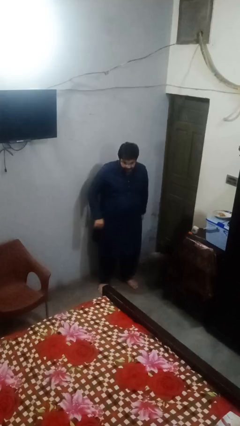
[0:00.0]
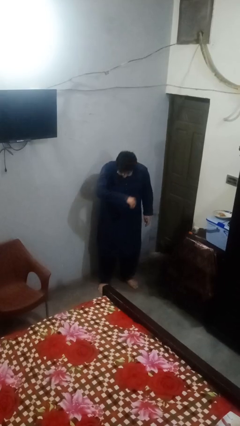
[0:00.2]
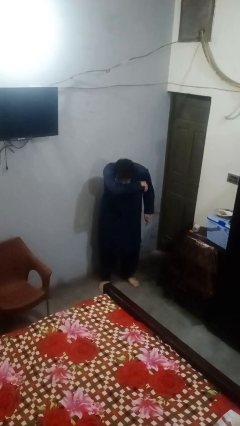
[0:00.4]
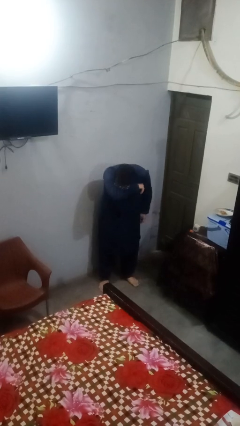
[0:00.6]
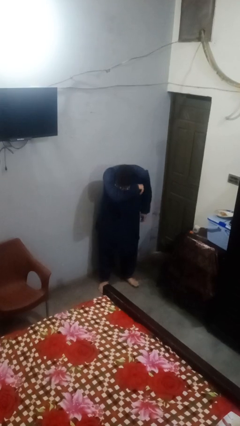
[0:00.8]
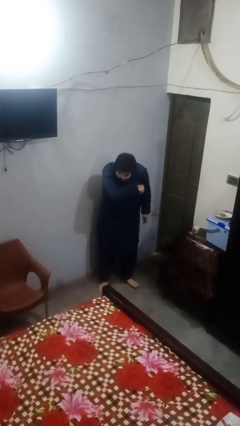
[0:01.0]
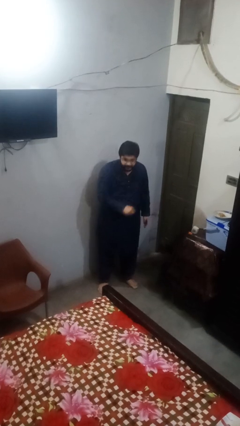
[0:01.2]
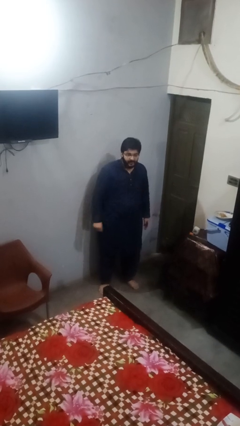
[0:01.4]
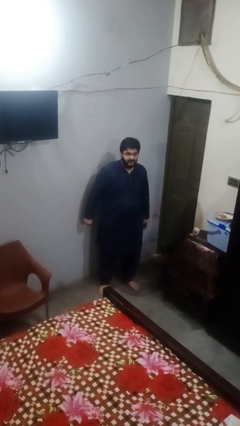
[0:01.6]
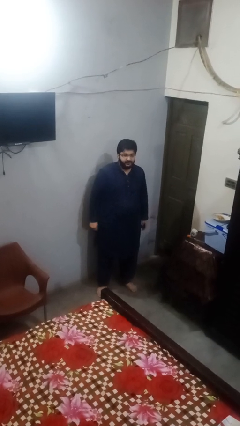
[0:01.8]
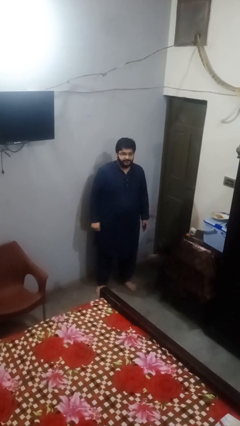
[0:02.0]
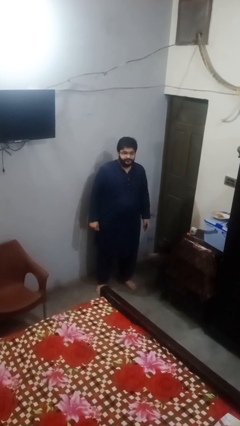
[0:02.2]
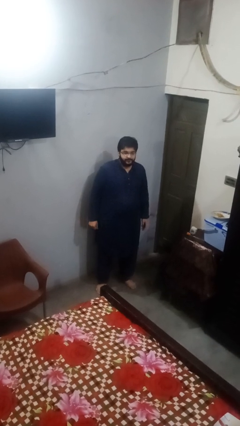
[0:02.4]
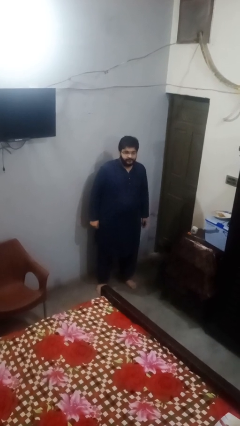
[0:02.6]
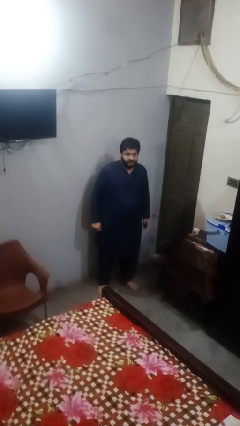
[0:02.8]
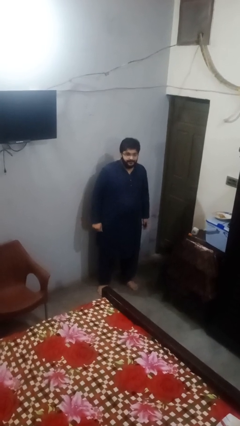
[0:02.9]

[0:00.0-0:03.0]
person sneezes into arm

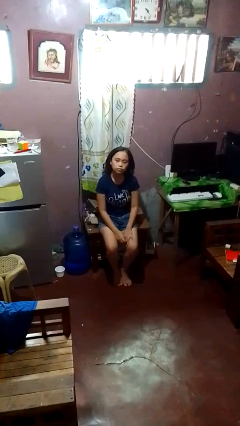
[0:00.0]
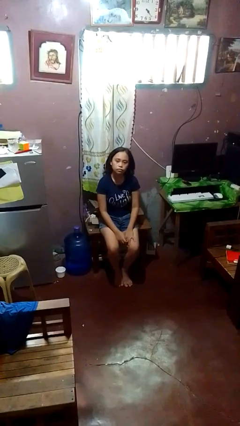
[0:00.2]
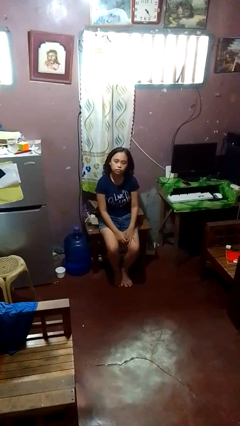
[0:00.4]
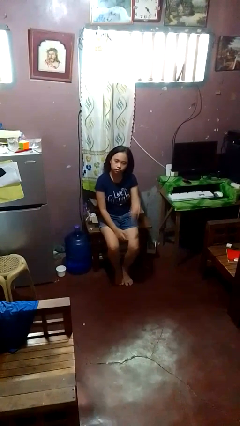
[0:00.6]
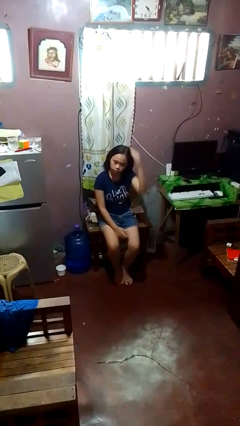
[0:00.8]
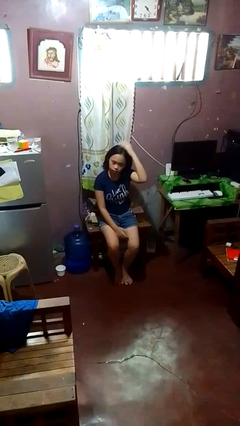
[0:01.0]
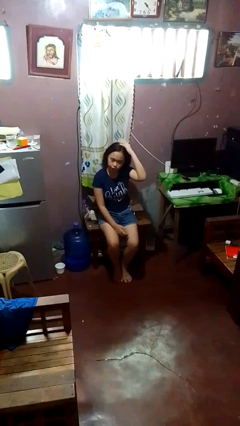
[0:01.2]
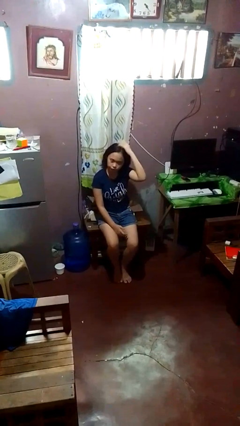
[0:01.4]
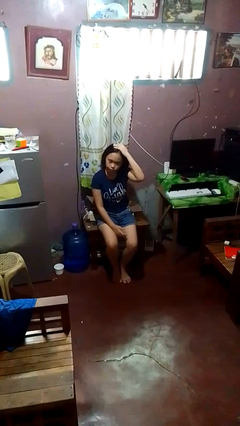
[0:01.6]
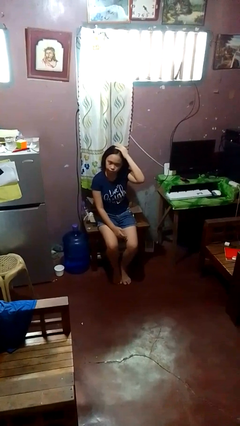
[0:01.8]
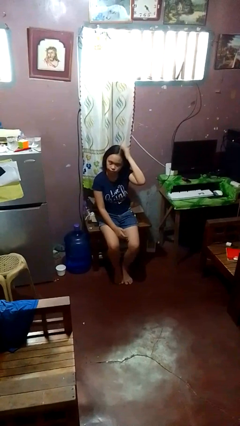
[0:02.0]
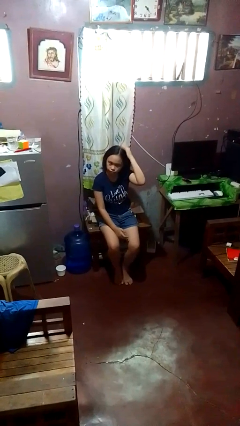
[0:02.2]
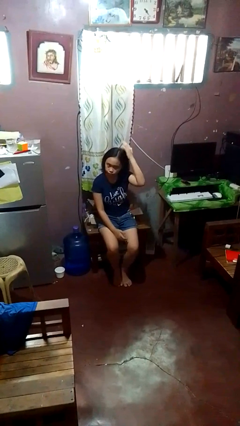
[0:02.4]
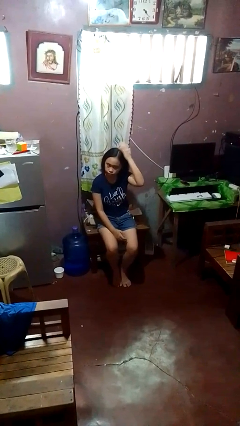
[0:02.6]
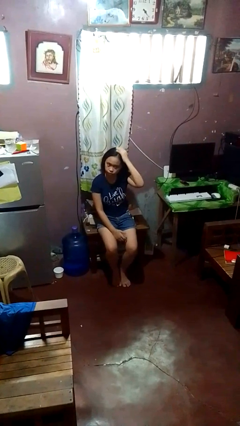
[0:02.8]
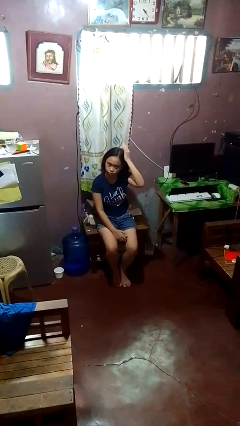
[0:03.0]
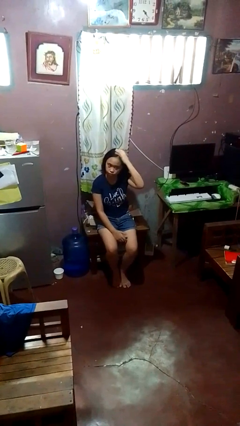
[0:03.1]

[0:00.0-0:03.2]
person pats head

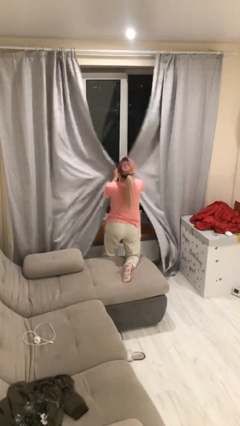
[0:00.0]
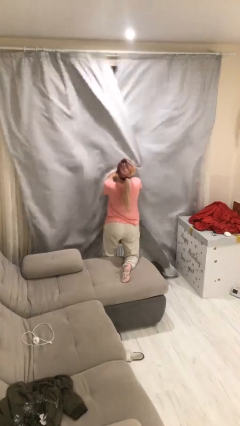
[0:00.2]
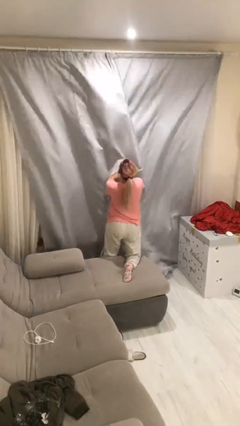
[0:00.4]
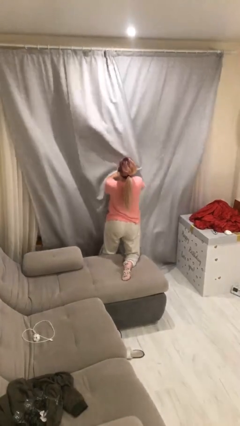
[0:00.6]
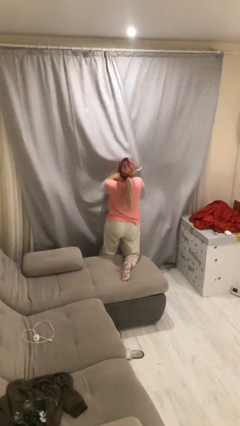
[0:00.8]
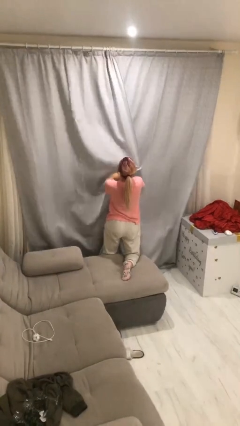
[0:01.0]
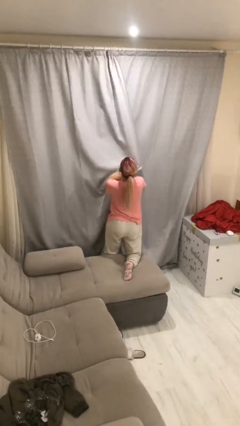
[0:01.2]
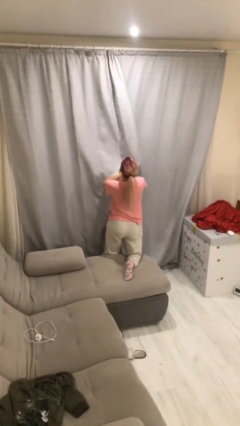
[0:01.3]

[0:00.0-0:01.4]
person closes curtains

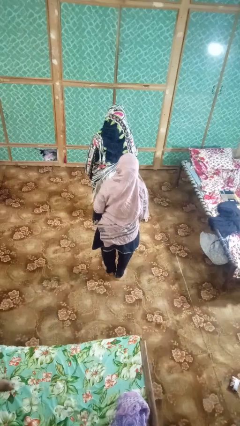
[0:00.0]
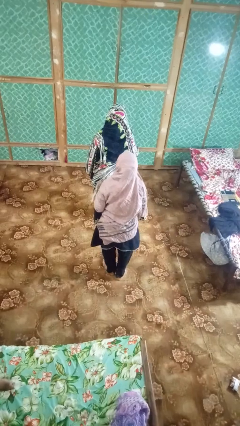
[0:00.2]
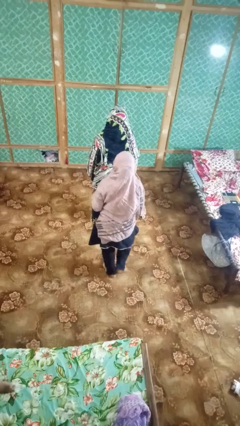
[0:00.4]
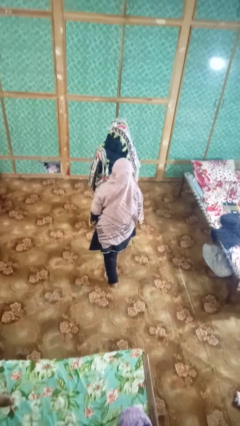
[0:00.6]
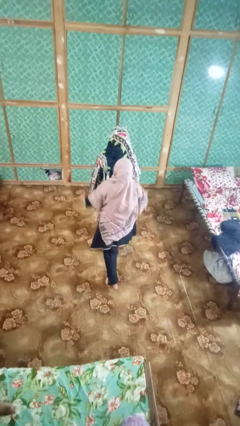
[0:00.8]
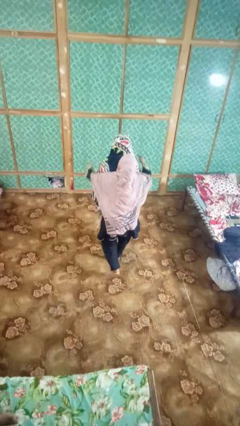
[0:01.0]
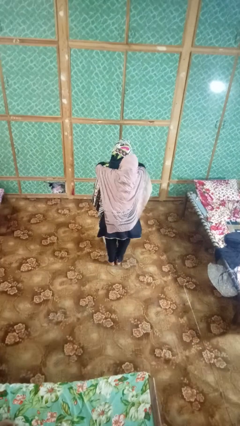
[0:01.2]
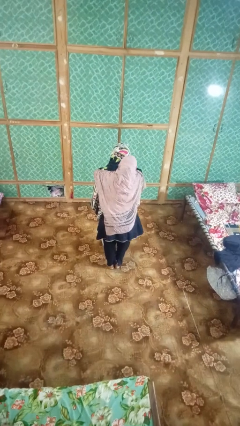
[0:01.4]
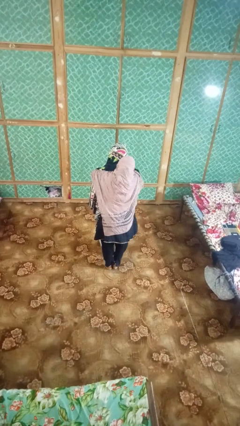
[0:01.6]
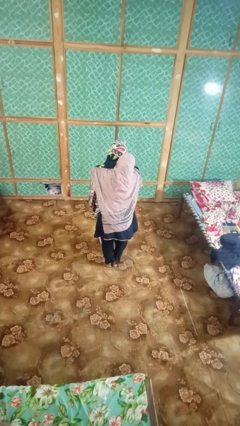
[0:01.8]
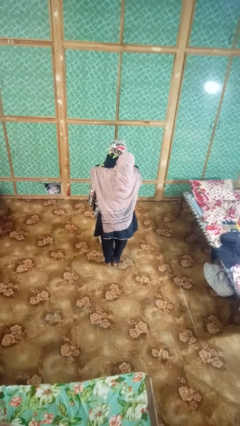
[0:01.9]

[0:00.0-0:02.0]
person hugs person from behind

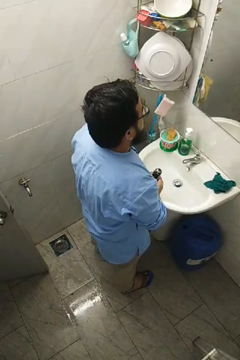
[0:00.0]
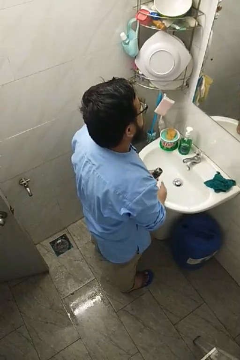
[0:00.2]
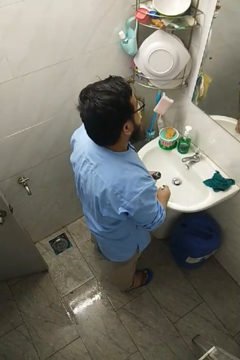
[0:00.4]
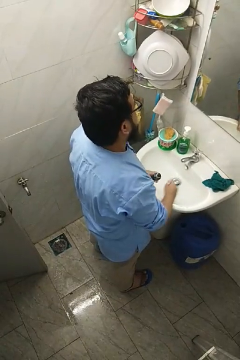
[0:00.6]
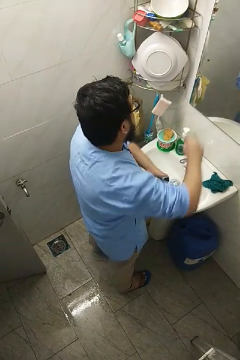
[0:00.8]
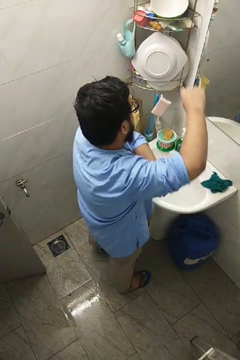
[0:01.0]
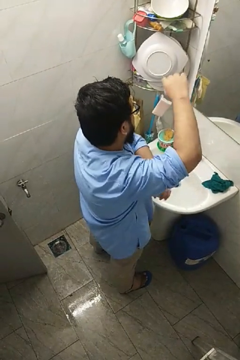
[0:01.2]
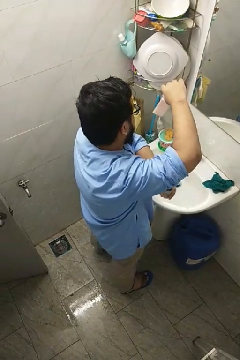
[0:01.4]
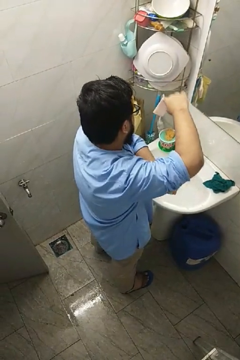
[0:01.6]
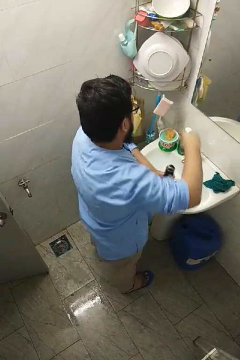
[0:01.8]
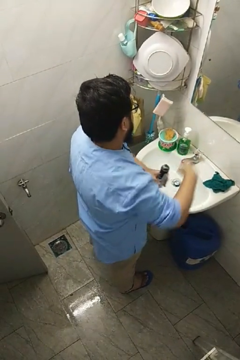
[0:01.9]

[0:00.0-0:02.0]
person applies deodorant

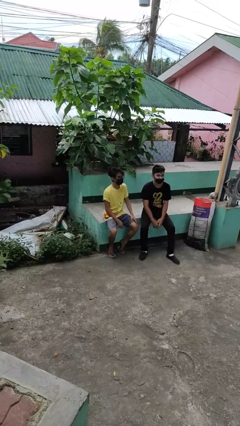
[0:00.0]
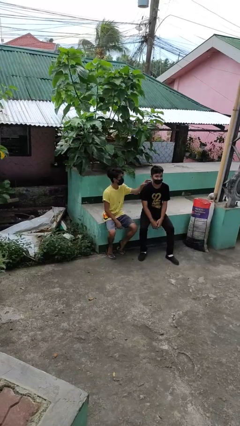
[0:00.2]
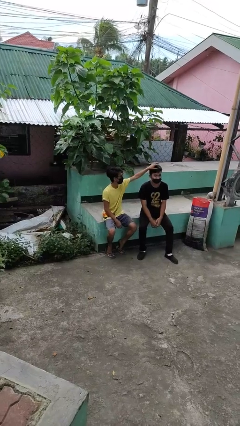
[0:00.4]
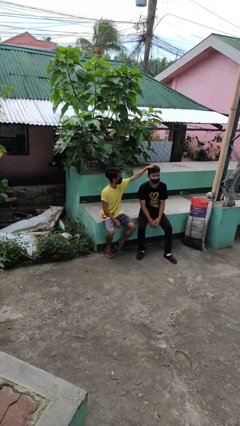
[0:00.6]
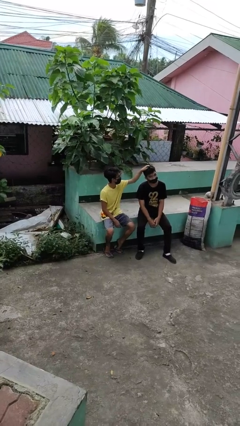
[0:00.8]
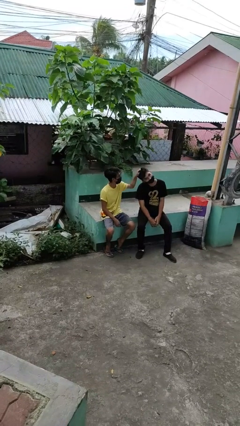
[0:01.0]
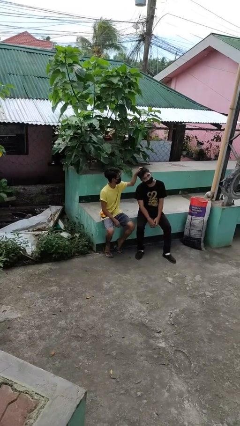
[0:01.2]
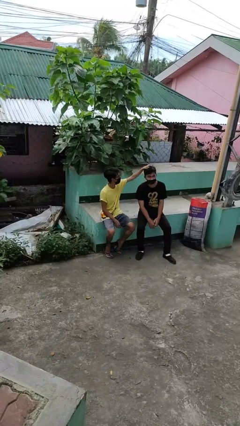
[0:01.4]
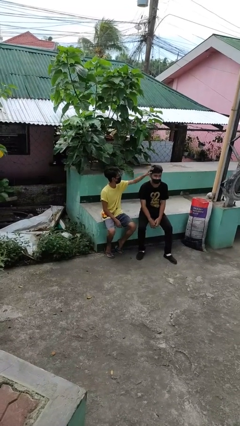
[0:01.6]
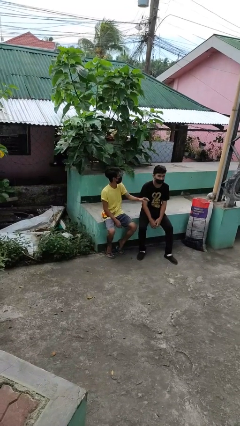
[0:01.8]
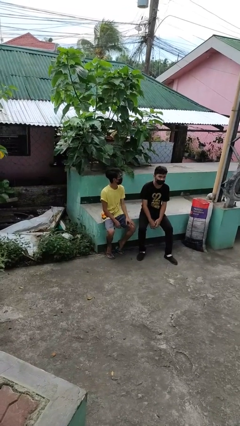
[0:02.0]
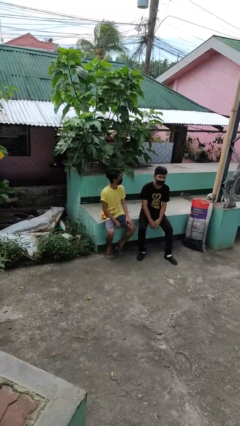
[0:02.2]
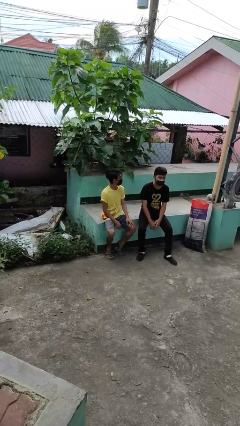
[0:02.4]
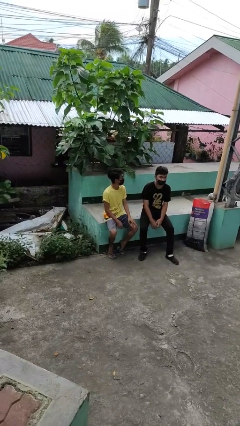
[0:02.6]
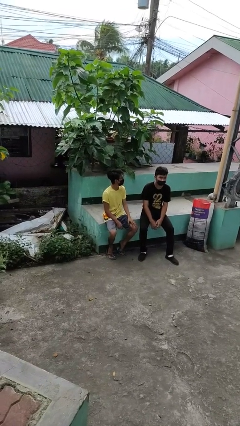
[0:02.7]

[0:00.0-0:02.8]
person grabs person by hair

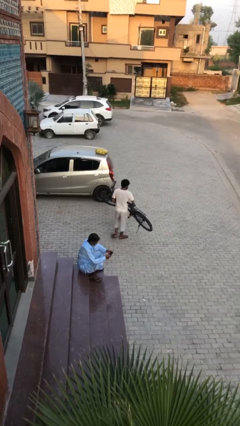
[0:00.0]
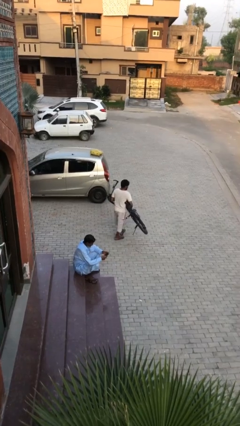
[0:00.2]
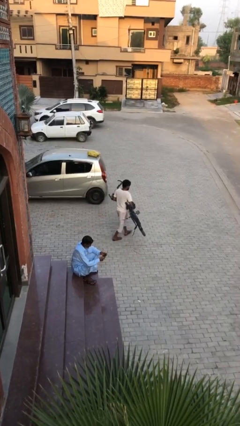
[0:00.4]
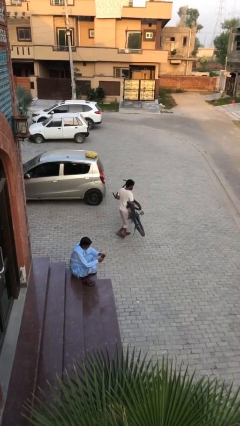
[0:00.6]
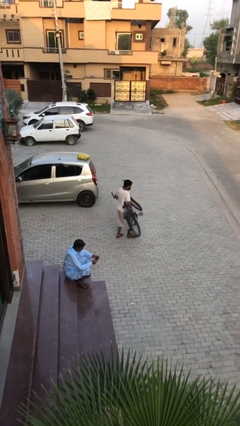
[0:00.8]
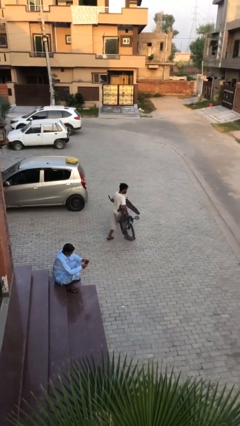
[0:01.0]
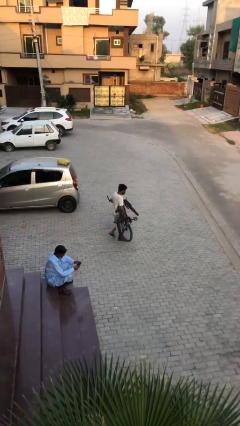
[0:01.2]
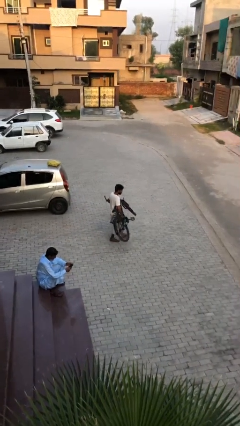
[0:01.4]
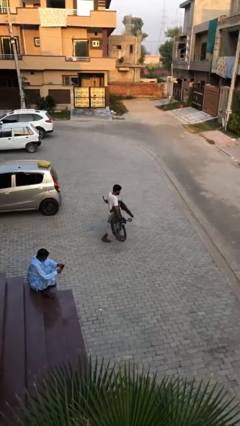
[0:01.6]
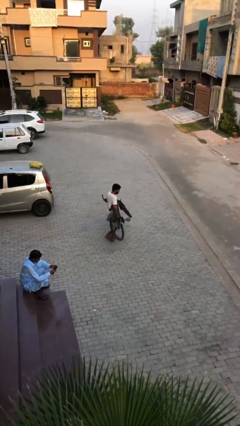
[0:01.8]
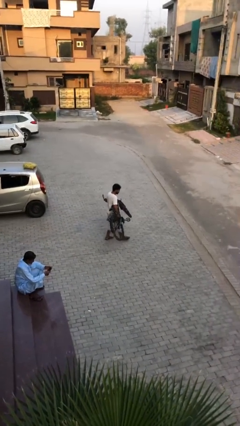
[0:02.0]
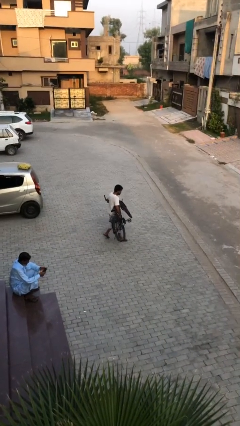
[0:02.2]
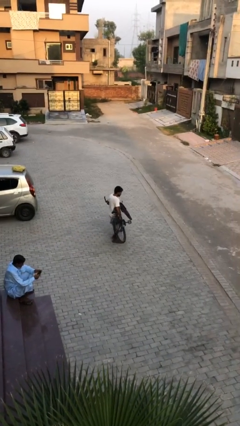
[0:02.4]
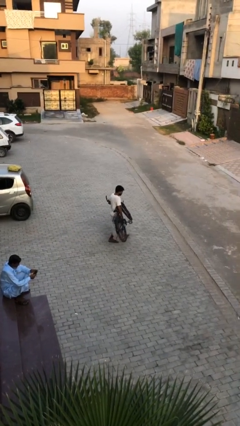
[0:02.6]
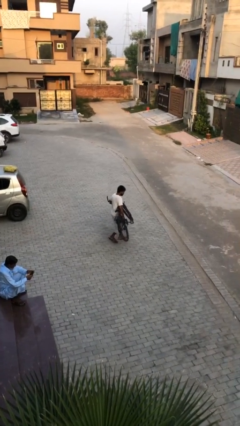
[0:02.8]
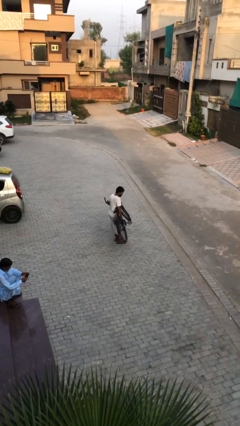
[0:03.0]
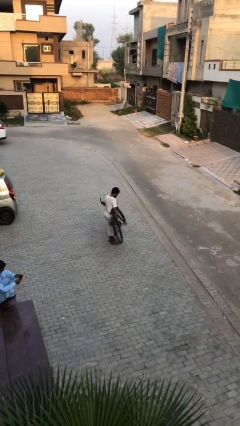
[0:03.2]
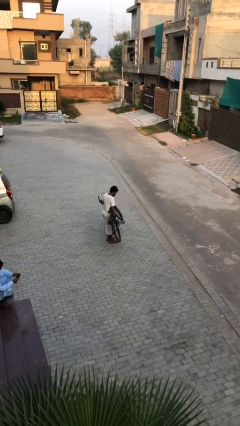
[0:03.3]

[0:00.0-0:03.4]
person carries heavy object
